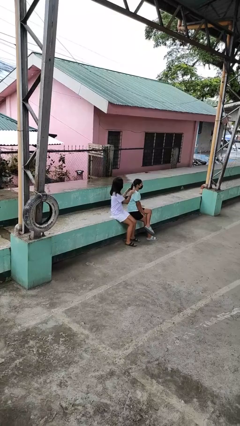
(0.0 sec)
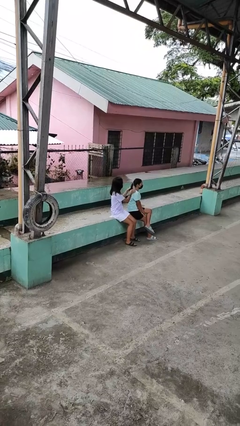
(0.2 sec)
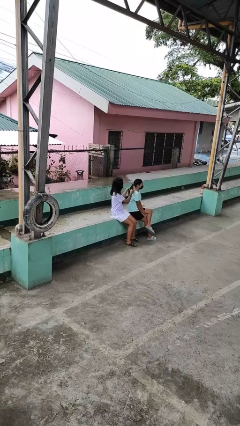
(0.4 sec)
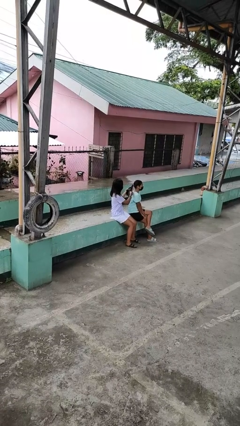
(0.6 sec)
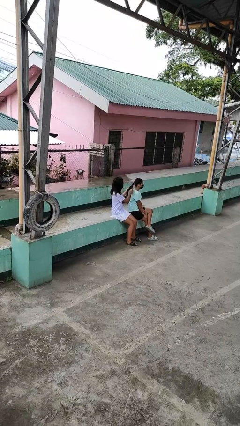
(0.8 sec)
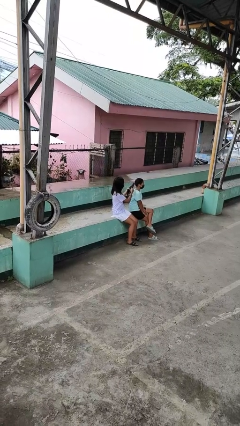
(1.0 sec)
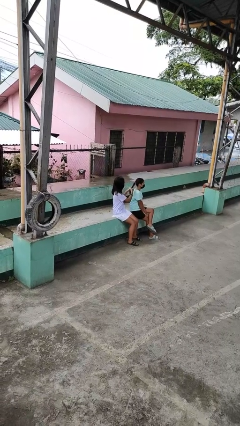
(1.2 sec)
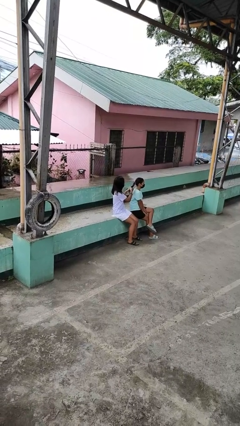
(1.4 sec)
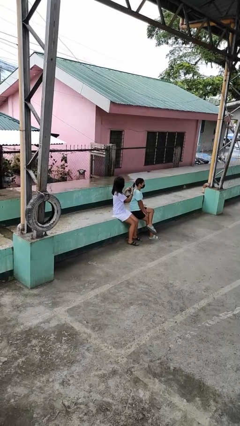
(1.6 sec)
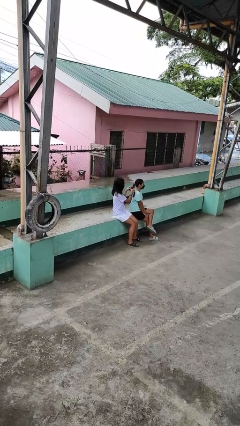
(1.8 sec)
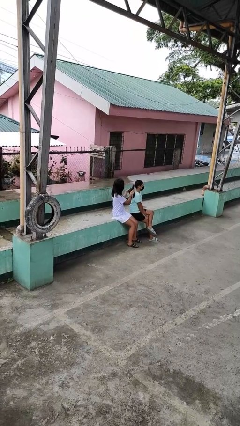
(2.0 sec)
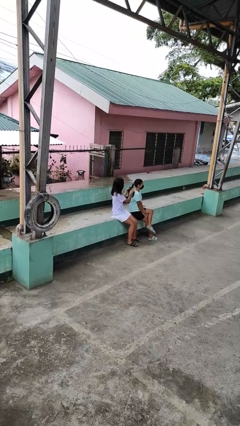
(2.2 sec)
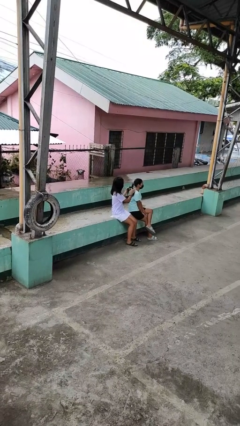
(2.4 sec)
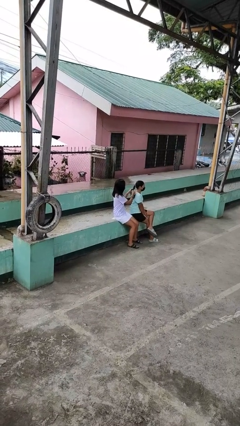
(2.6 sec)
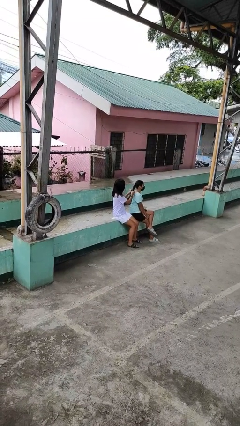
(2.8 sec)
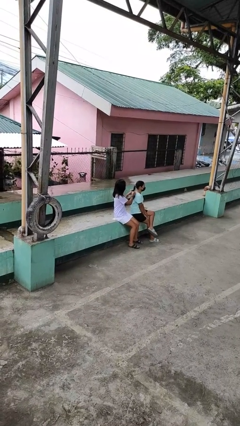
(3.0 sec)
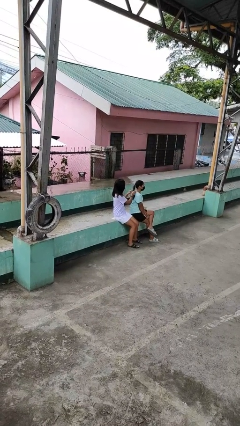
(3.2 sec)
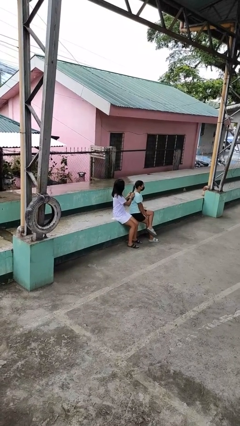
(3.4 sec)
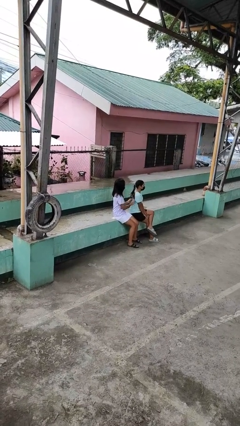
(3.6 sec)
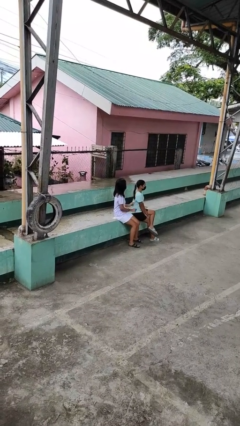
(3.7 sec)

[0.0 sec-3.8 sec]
person braids hair of person

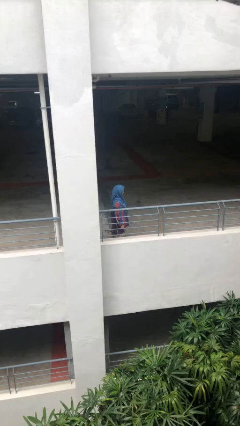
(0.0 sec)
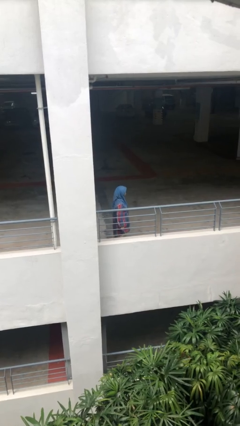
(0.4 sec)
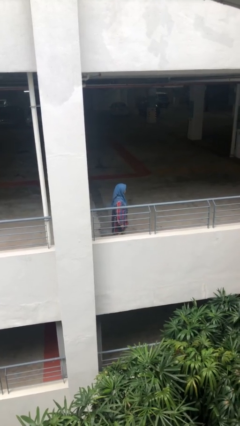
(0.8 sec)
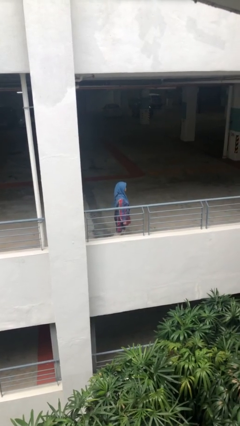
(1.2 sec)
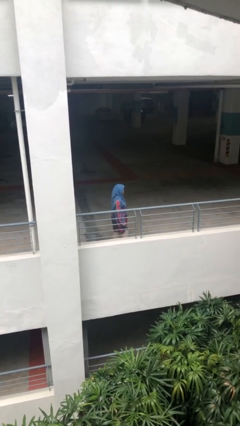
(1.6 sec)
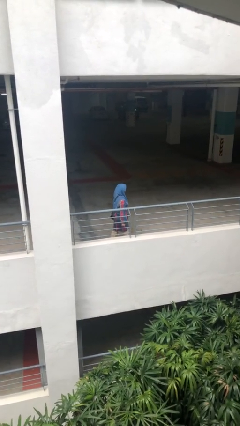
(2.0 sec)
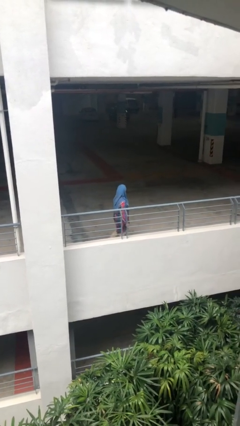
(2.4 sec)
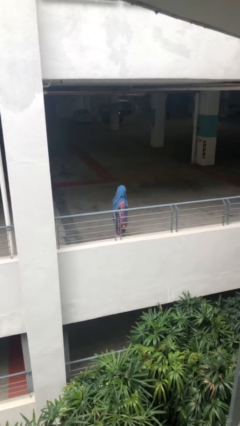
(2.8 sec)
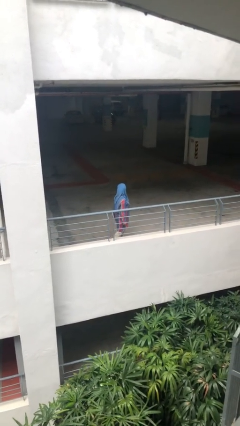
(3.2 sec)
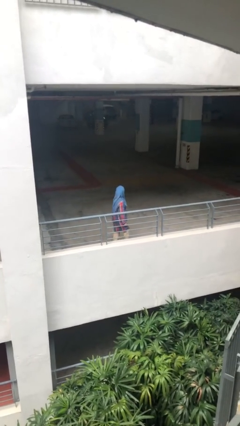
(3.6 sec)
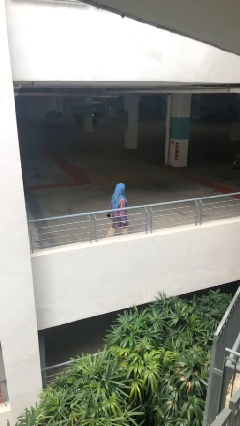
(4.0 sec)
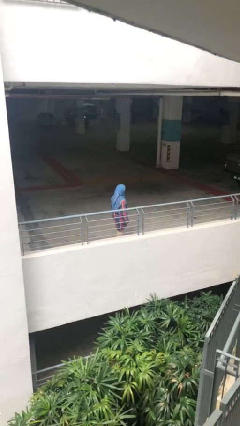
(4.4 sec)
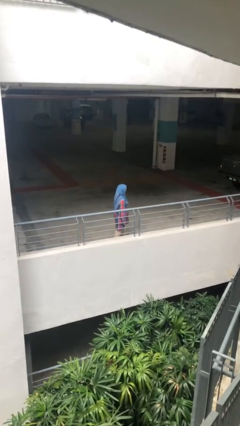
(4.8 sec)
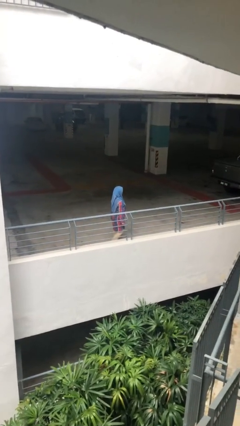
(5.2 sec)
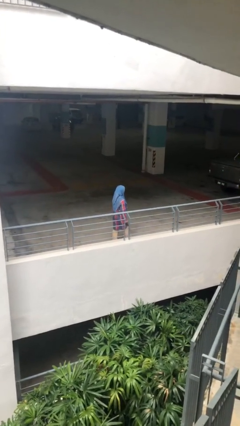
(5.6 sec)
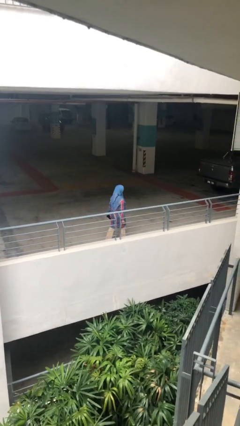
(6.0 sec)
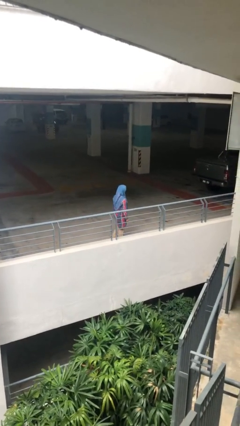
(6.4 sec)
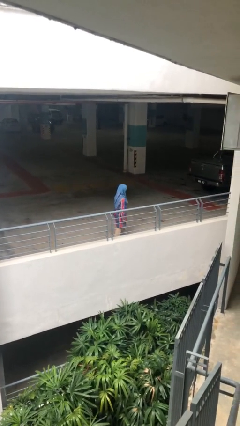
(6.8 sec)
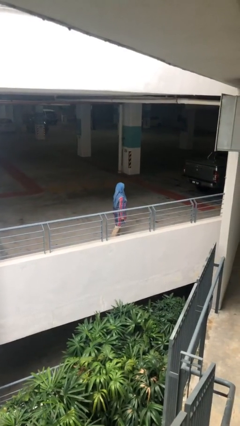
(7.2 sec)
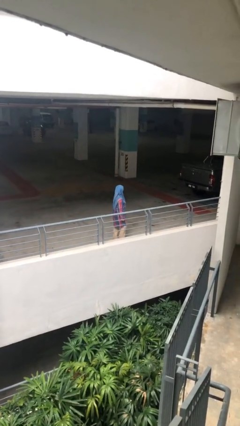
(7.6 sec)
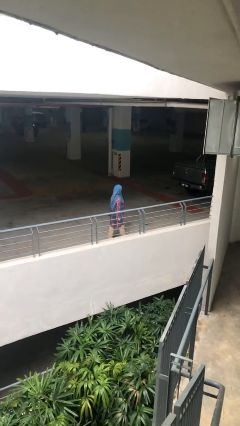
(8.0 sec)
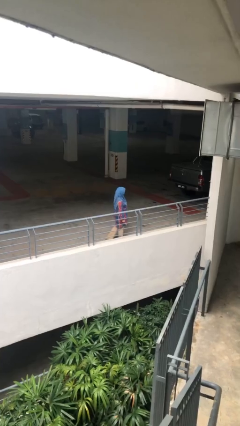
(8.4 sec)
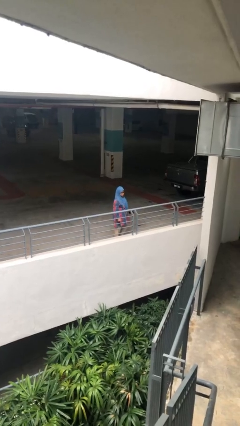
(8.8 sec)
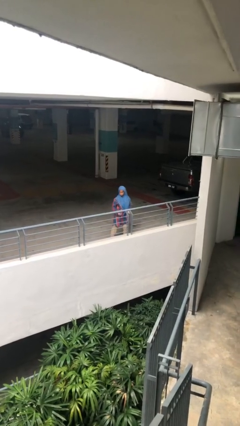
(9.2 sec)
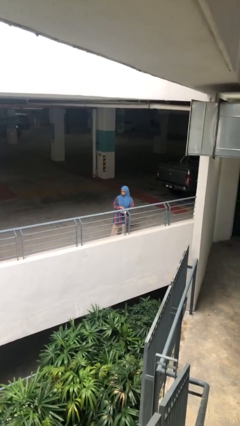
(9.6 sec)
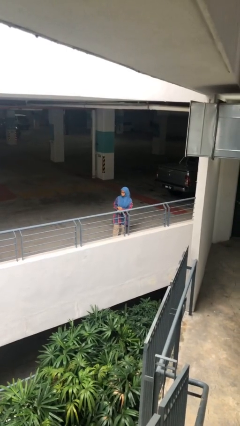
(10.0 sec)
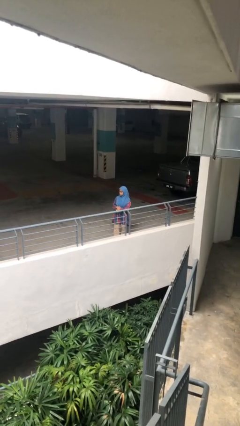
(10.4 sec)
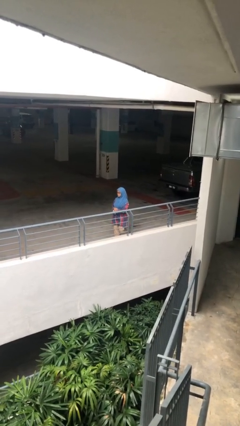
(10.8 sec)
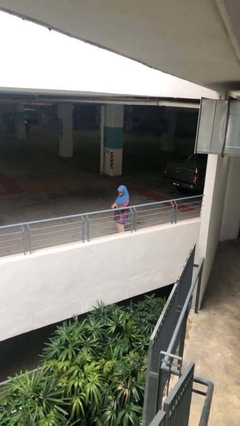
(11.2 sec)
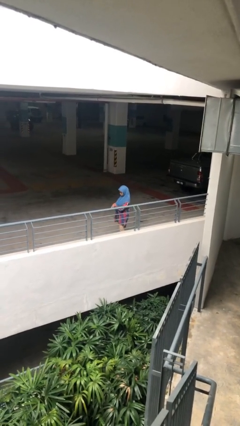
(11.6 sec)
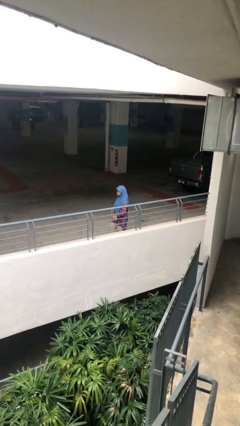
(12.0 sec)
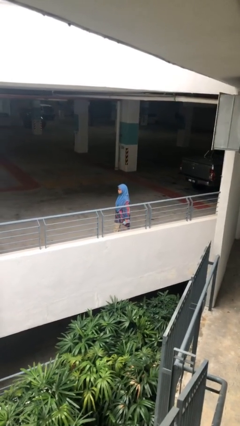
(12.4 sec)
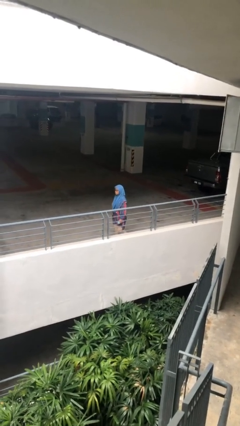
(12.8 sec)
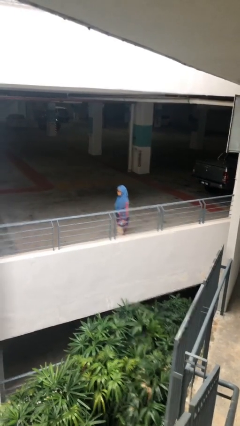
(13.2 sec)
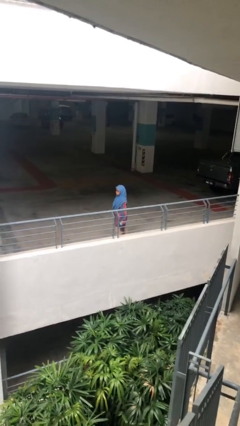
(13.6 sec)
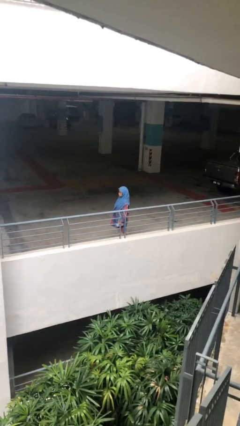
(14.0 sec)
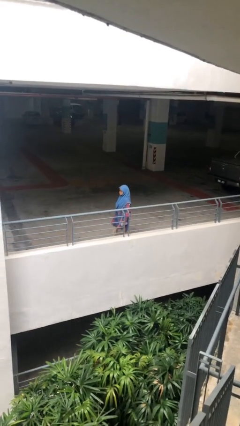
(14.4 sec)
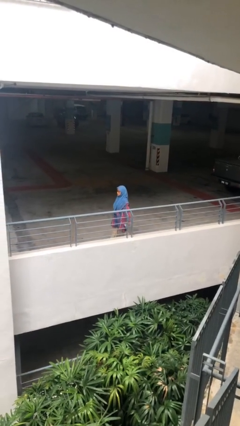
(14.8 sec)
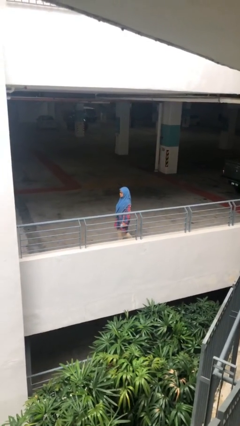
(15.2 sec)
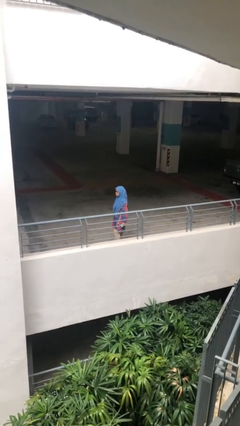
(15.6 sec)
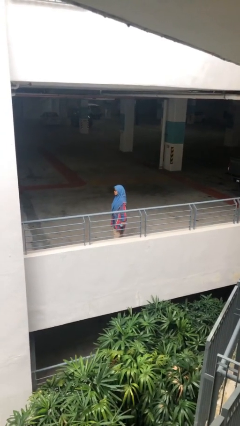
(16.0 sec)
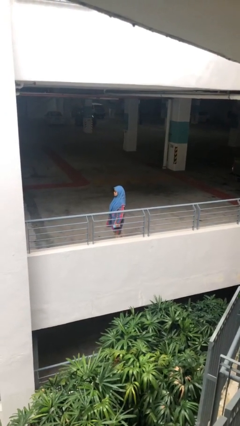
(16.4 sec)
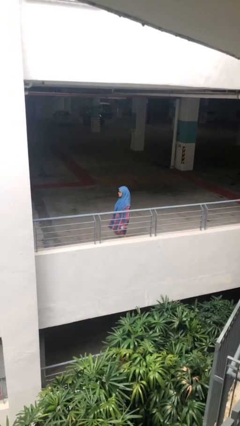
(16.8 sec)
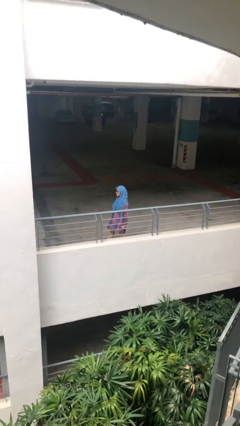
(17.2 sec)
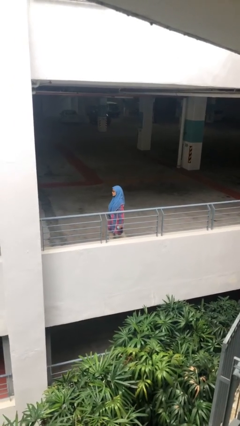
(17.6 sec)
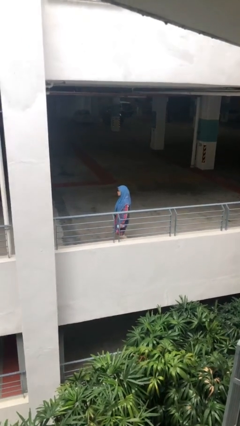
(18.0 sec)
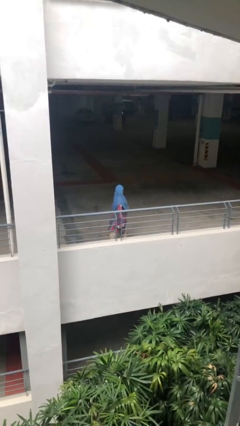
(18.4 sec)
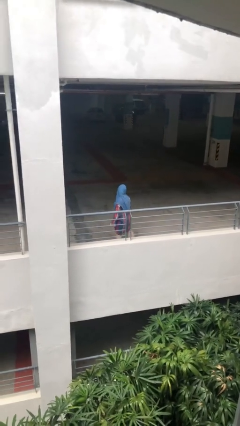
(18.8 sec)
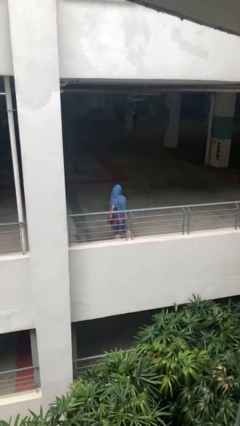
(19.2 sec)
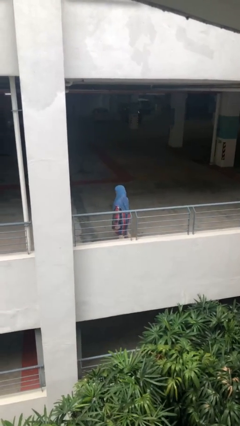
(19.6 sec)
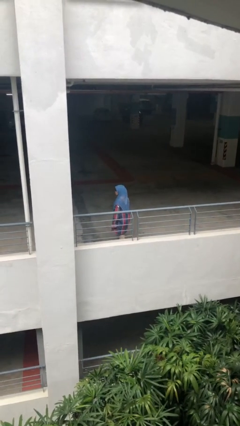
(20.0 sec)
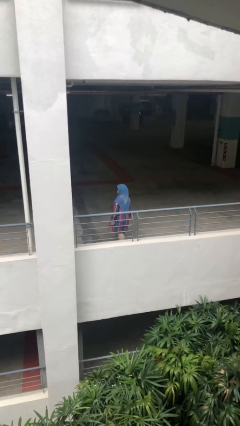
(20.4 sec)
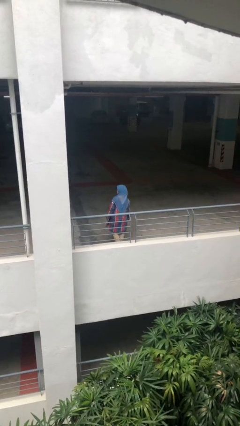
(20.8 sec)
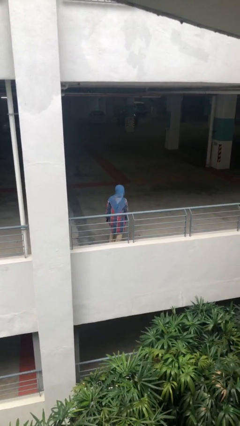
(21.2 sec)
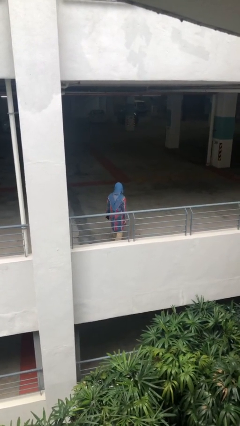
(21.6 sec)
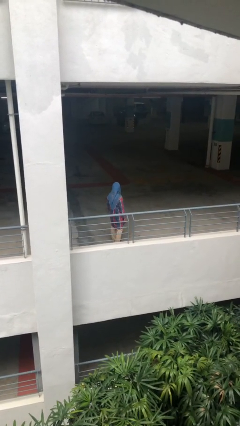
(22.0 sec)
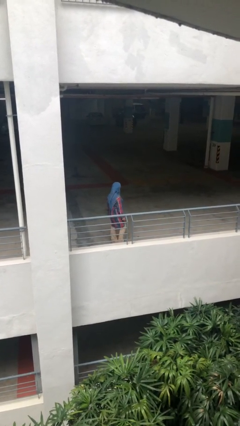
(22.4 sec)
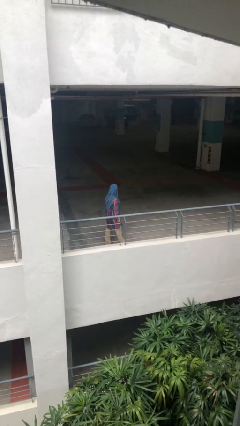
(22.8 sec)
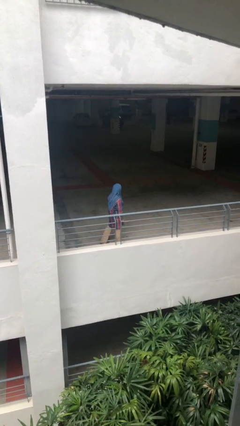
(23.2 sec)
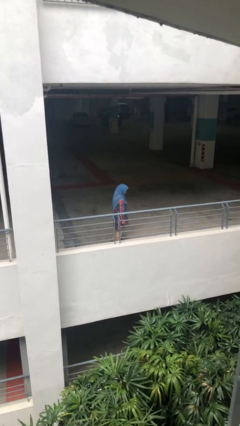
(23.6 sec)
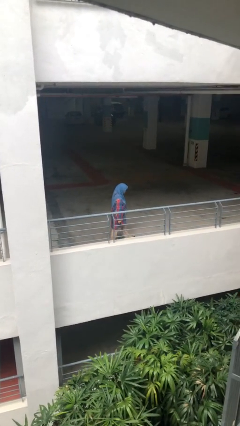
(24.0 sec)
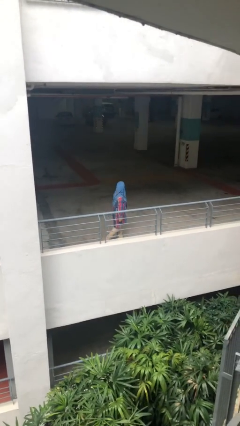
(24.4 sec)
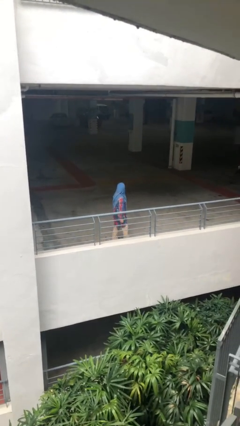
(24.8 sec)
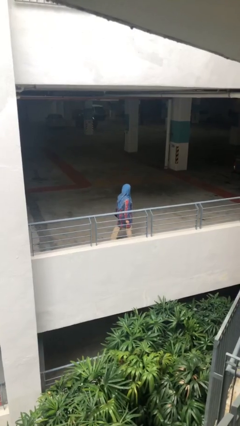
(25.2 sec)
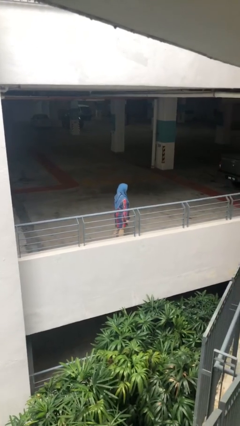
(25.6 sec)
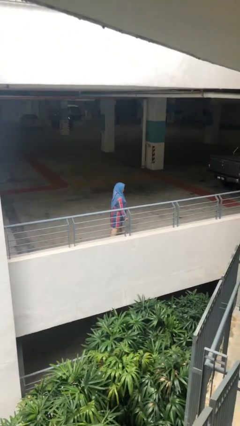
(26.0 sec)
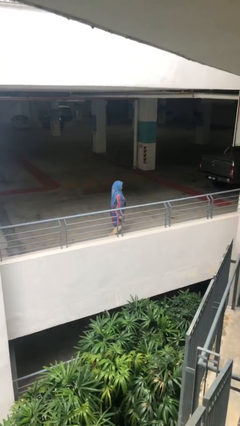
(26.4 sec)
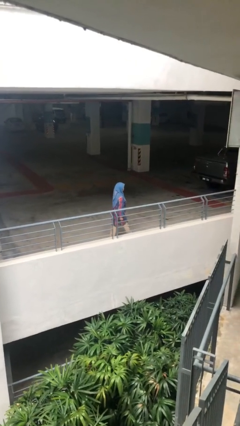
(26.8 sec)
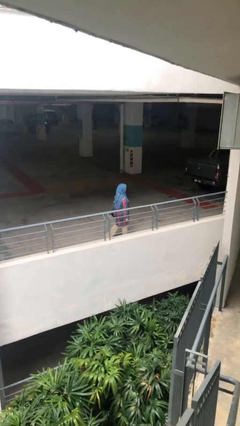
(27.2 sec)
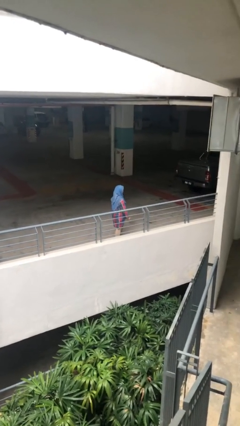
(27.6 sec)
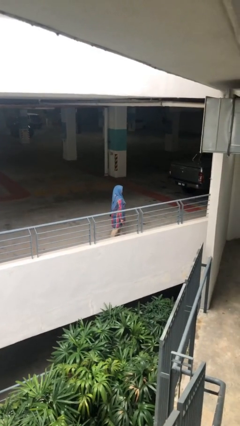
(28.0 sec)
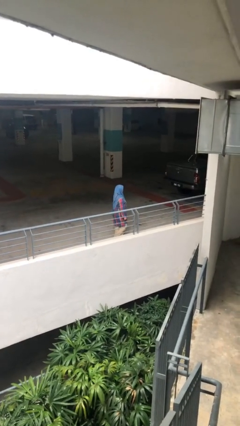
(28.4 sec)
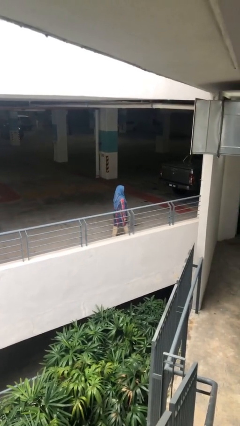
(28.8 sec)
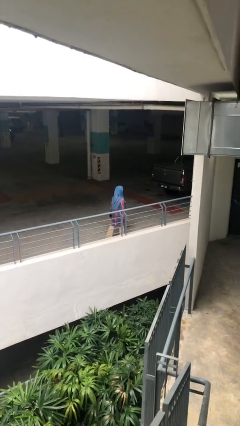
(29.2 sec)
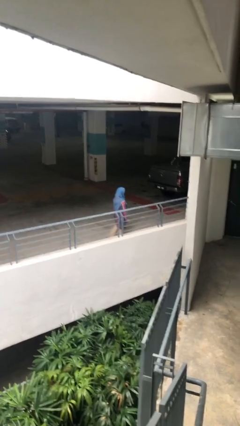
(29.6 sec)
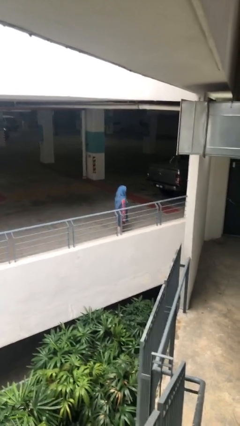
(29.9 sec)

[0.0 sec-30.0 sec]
person walks
